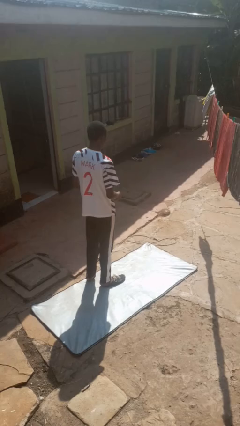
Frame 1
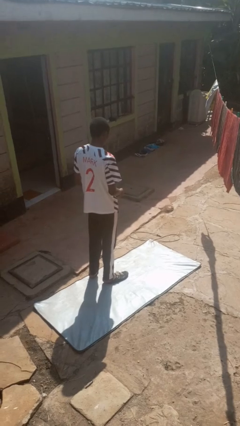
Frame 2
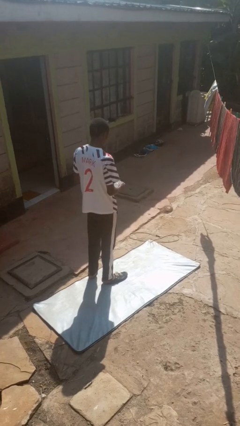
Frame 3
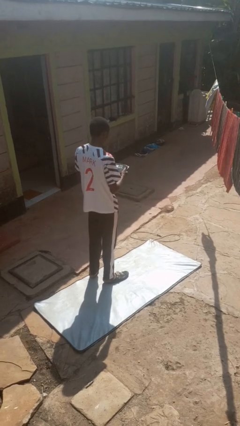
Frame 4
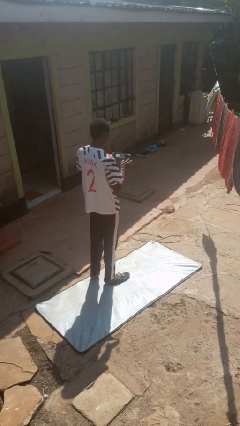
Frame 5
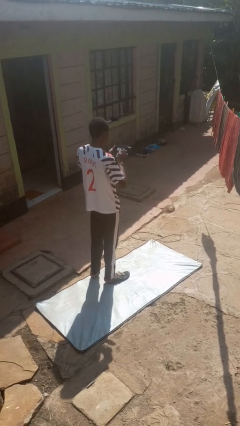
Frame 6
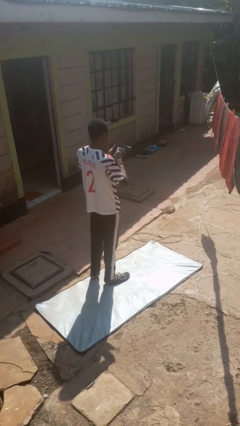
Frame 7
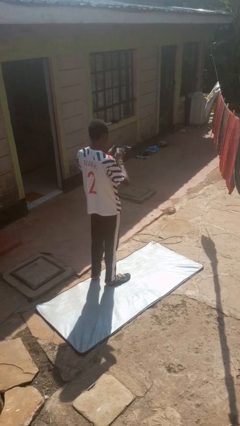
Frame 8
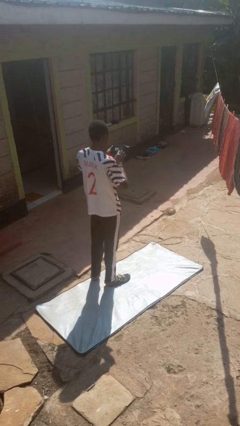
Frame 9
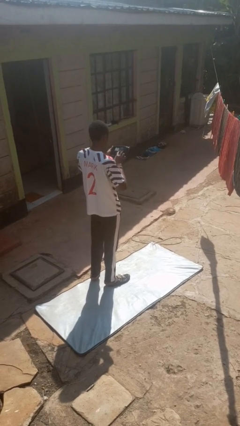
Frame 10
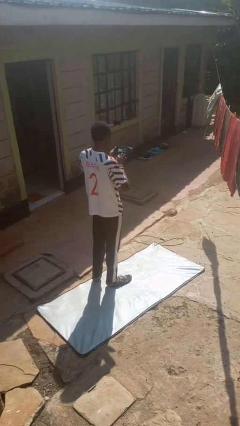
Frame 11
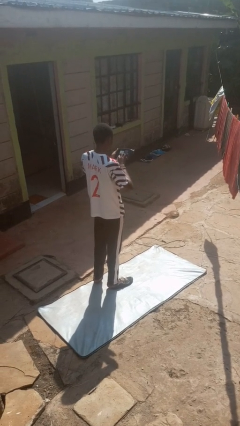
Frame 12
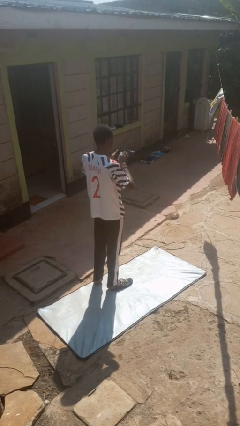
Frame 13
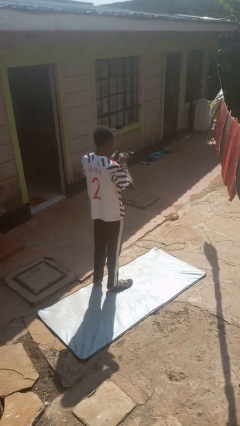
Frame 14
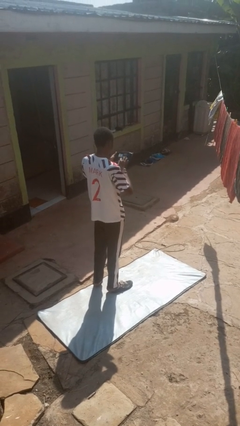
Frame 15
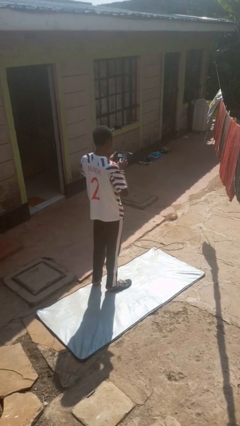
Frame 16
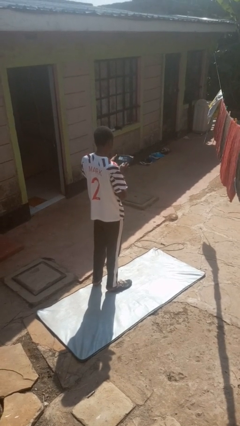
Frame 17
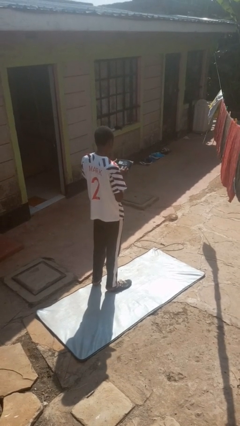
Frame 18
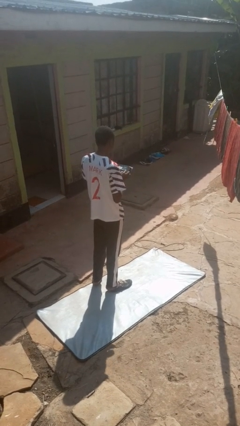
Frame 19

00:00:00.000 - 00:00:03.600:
person interacts with tablet

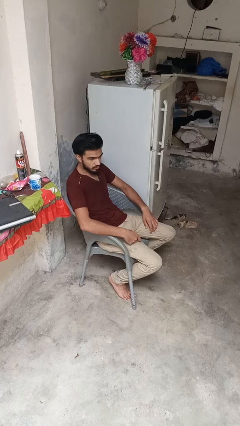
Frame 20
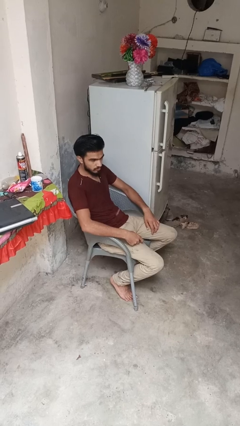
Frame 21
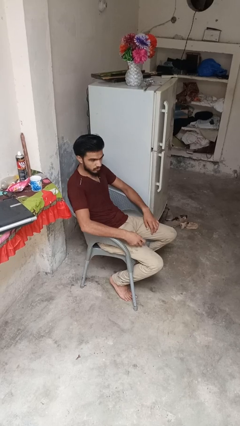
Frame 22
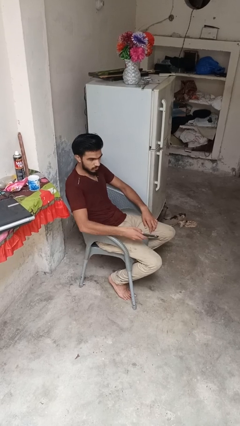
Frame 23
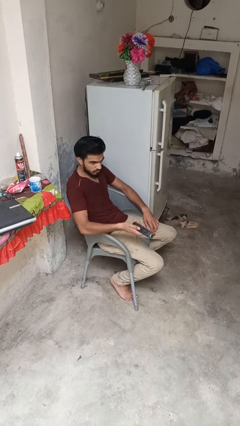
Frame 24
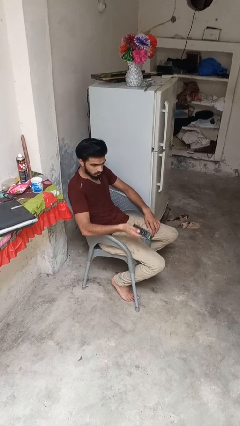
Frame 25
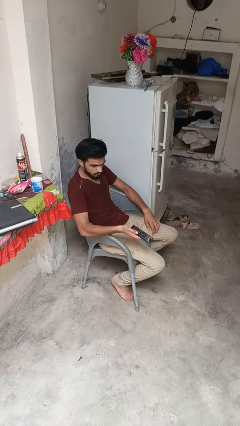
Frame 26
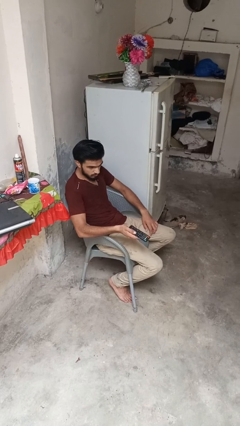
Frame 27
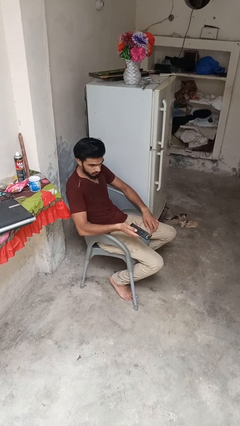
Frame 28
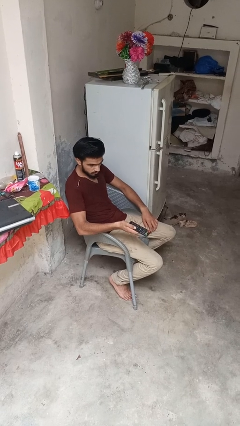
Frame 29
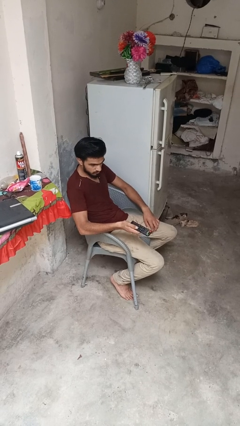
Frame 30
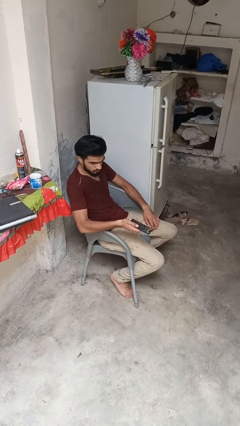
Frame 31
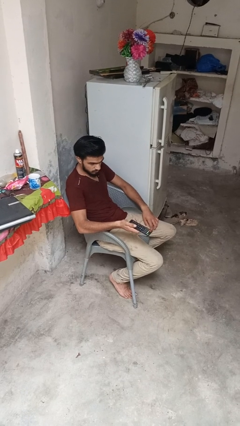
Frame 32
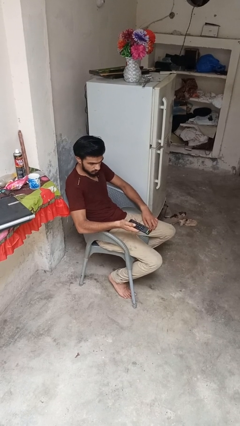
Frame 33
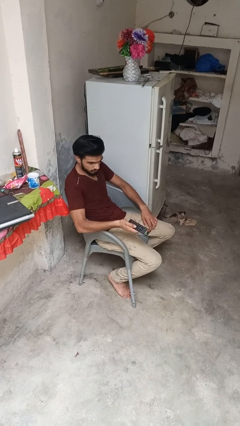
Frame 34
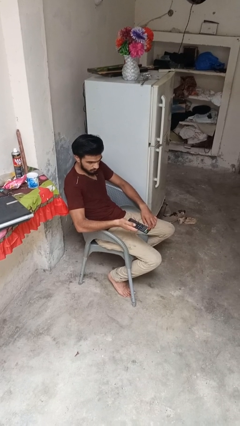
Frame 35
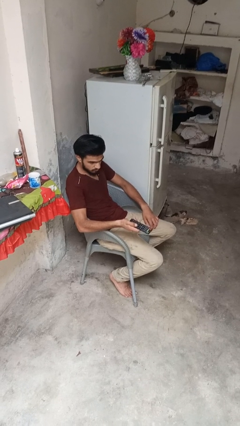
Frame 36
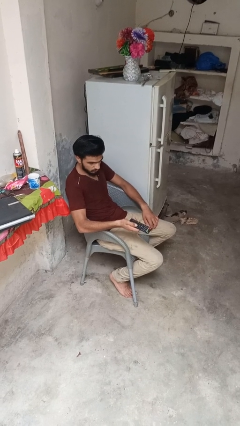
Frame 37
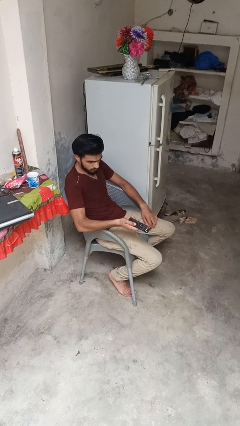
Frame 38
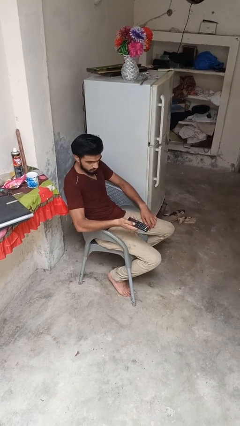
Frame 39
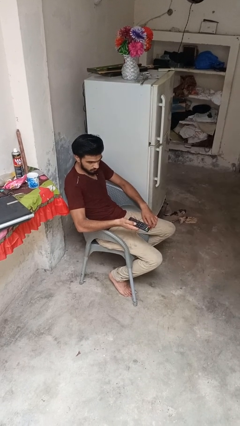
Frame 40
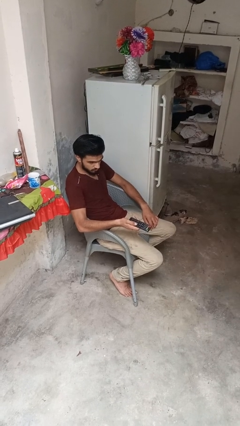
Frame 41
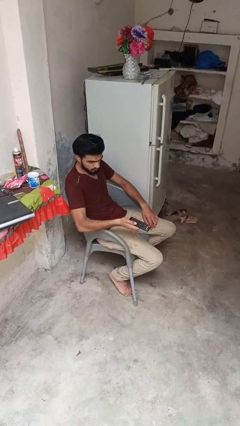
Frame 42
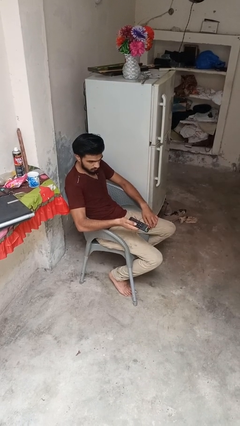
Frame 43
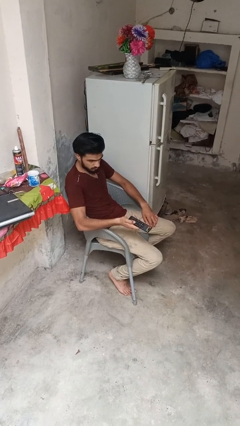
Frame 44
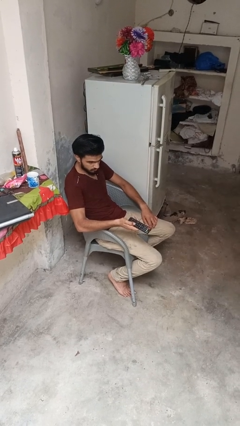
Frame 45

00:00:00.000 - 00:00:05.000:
person uses television remote

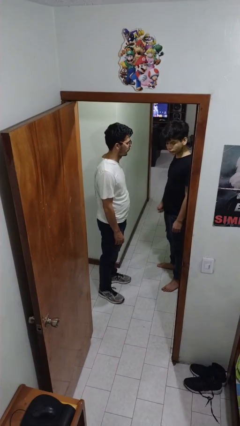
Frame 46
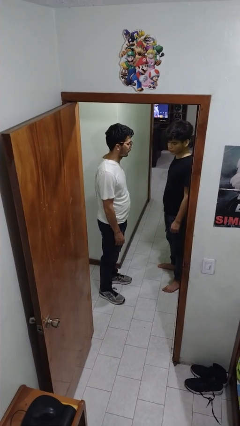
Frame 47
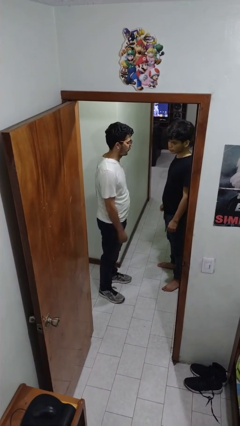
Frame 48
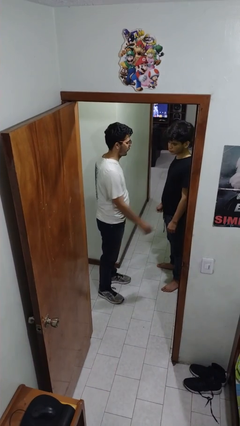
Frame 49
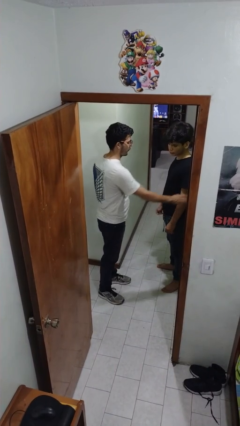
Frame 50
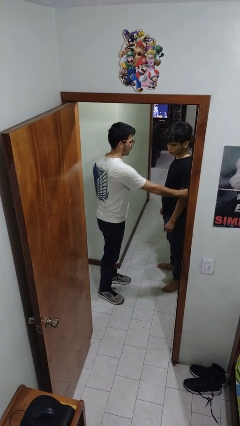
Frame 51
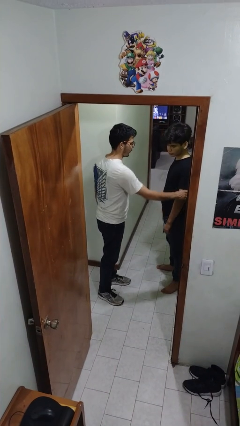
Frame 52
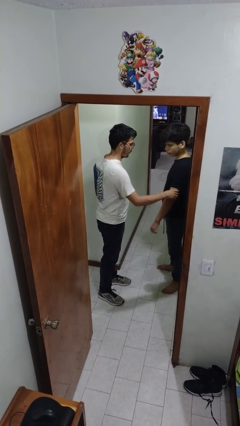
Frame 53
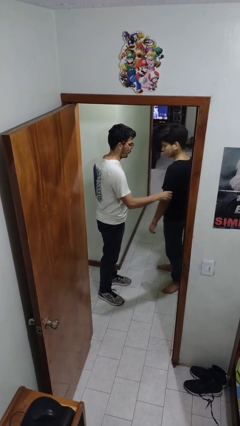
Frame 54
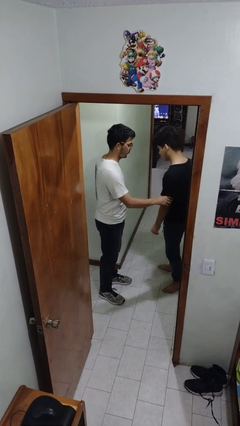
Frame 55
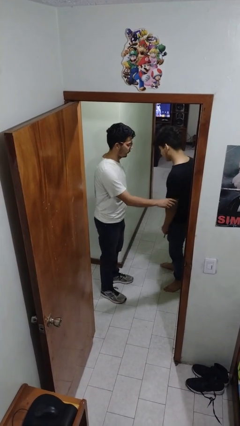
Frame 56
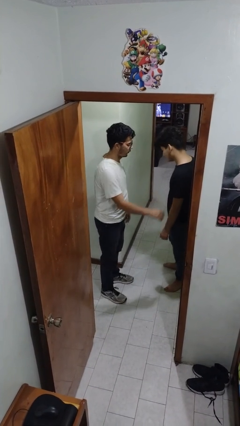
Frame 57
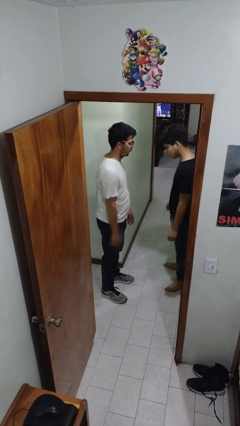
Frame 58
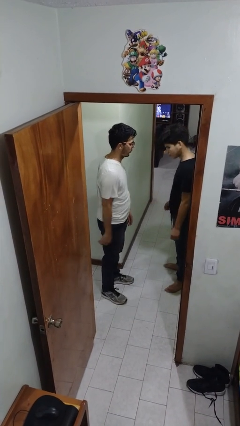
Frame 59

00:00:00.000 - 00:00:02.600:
person grabs person by bicep

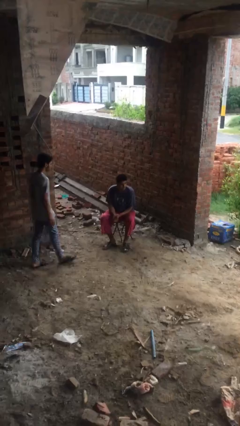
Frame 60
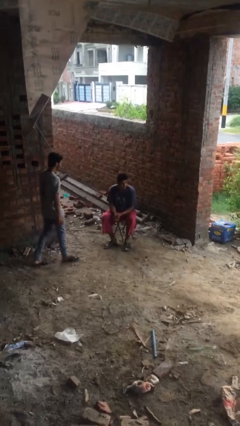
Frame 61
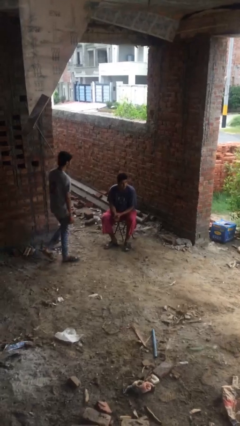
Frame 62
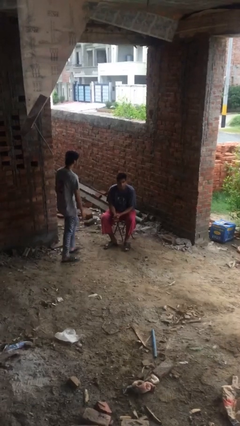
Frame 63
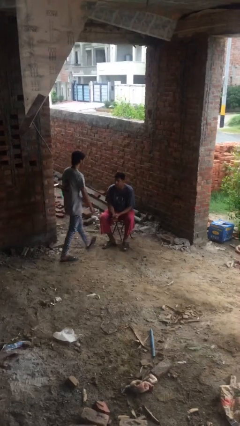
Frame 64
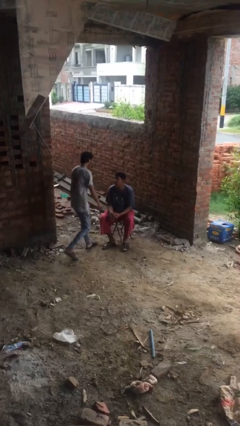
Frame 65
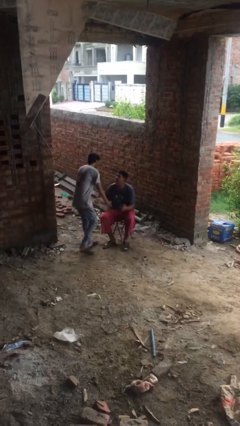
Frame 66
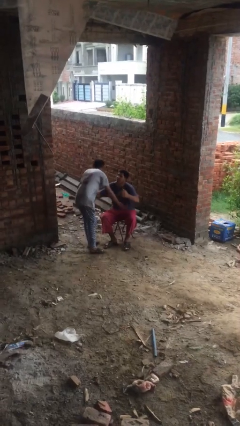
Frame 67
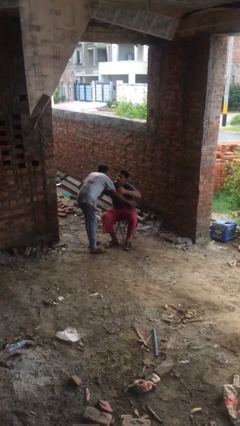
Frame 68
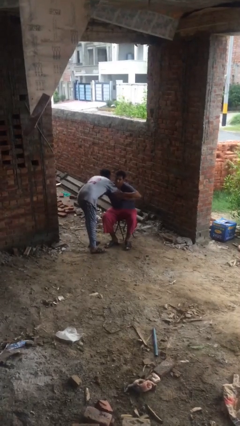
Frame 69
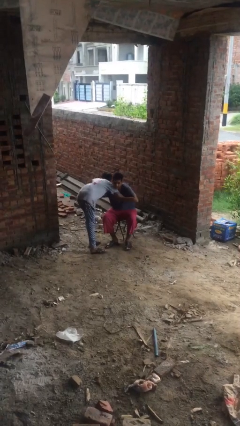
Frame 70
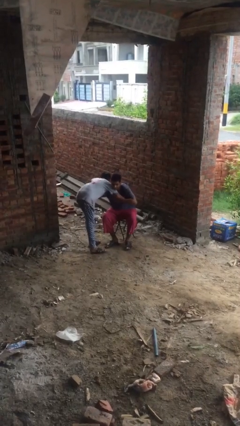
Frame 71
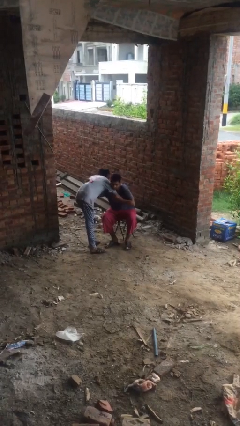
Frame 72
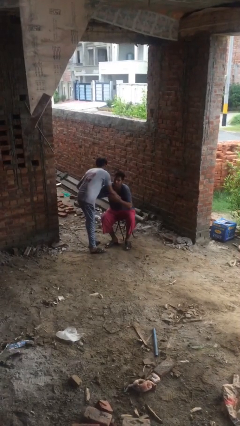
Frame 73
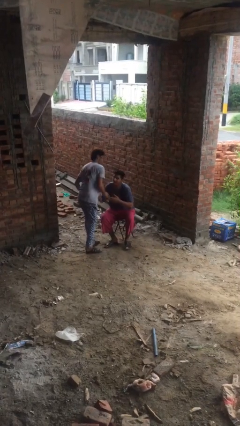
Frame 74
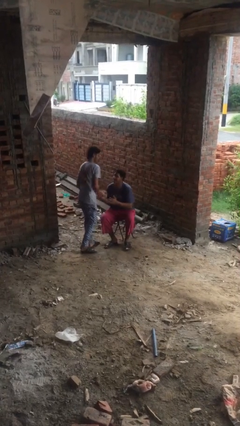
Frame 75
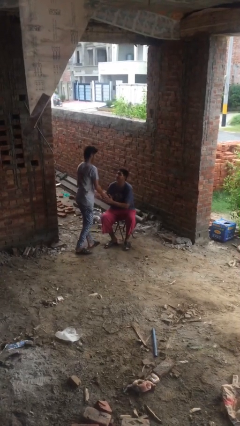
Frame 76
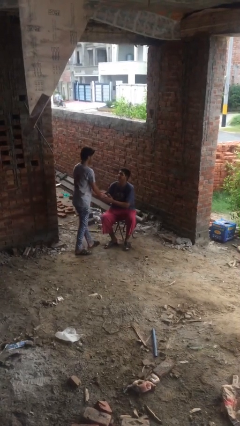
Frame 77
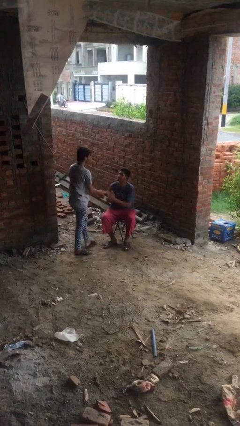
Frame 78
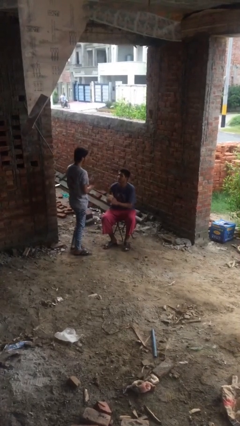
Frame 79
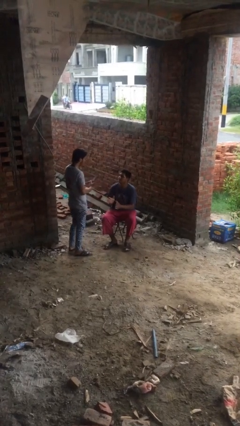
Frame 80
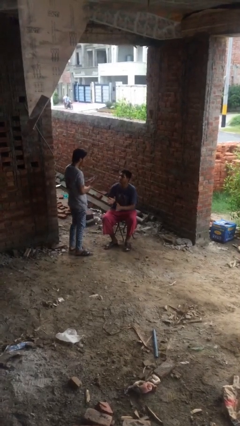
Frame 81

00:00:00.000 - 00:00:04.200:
person embraces person

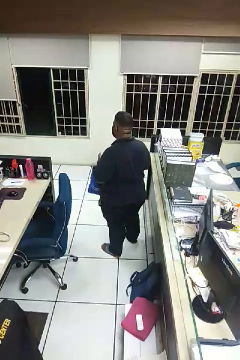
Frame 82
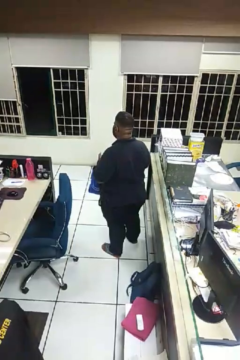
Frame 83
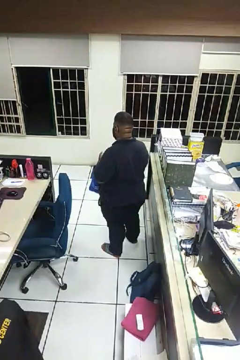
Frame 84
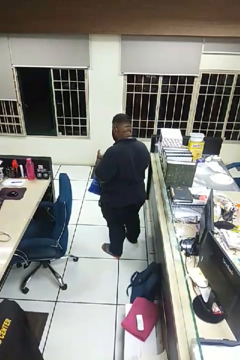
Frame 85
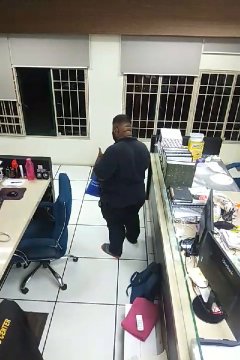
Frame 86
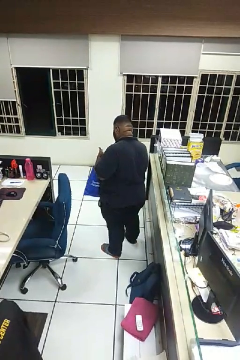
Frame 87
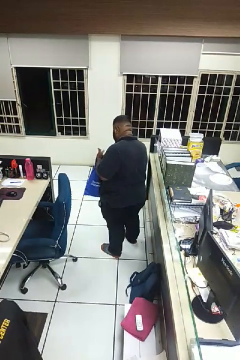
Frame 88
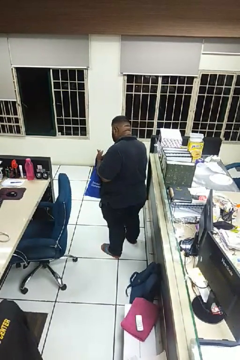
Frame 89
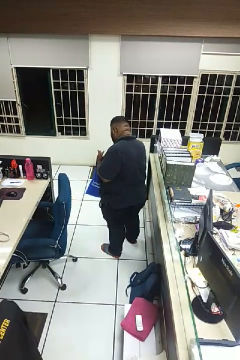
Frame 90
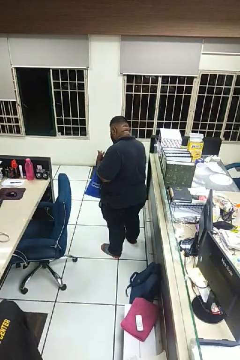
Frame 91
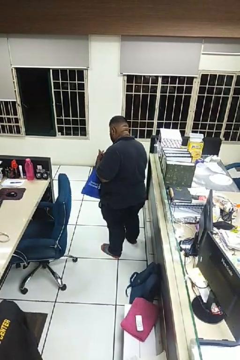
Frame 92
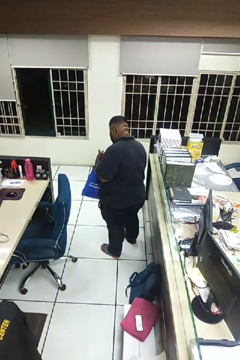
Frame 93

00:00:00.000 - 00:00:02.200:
person searches in bag

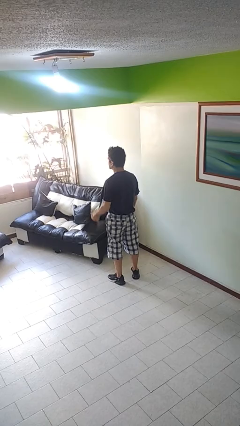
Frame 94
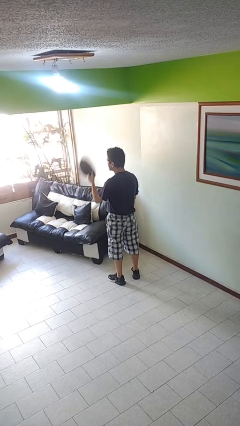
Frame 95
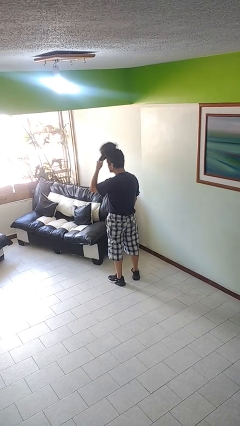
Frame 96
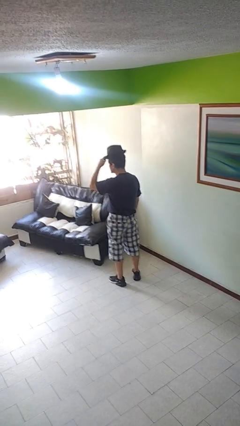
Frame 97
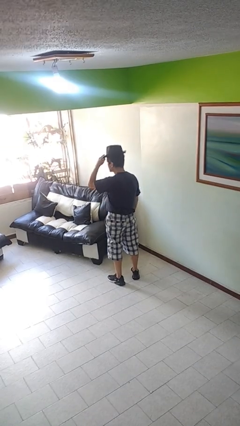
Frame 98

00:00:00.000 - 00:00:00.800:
person puts on hat
